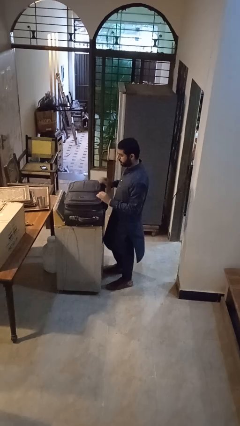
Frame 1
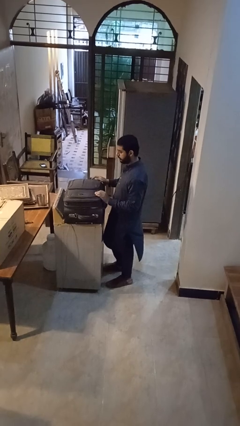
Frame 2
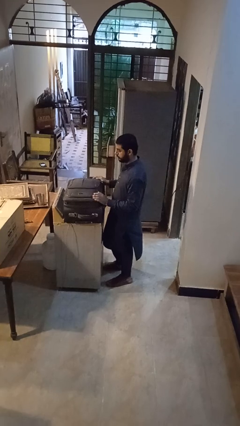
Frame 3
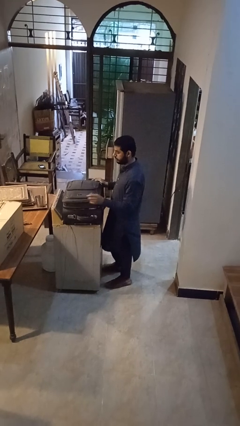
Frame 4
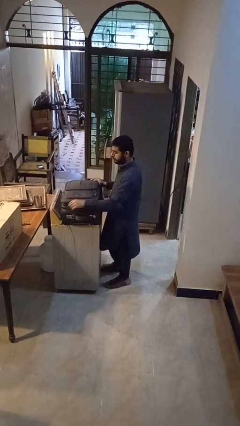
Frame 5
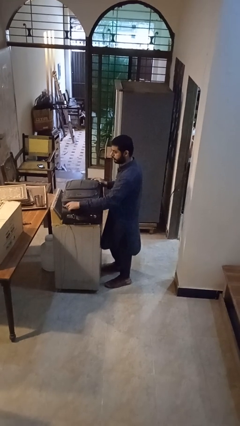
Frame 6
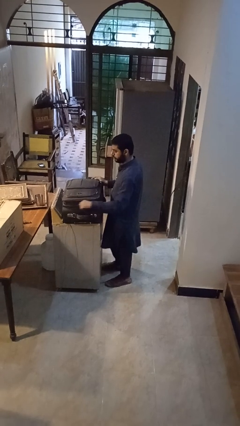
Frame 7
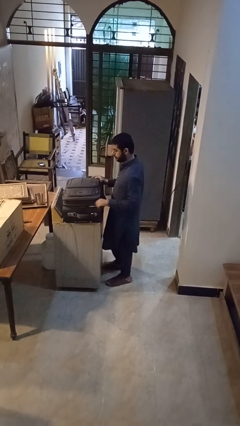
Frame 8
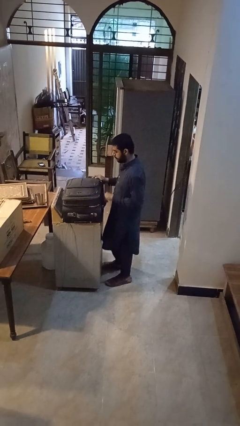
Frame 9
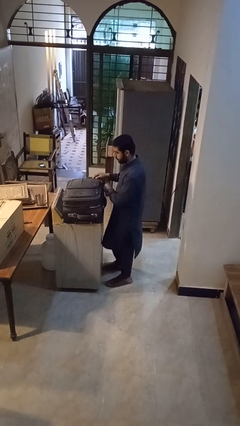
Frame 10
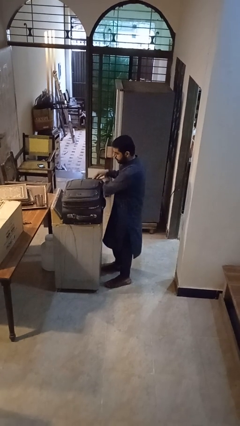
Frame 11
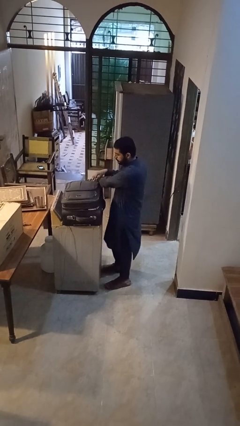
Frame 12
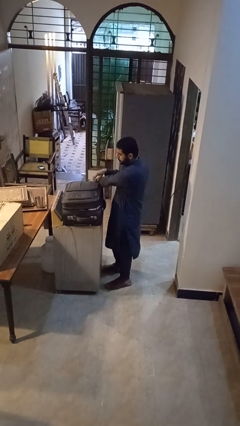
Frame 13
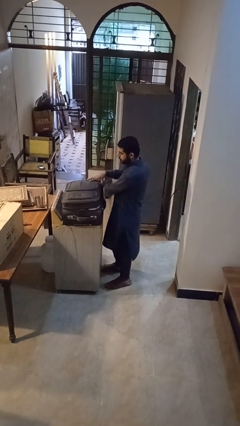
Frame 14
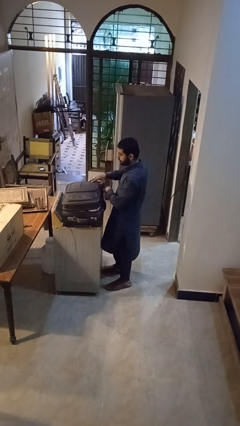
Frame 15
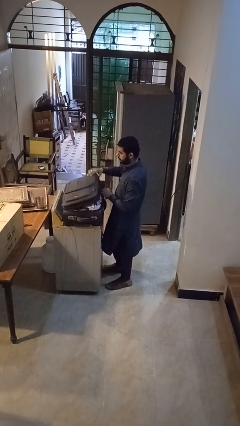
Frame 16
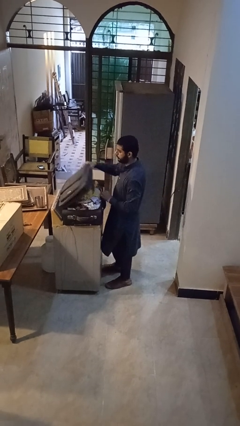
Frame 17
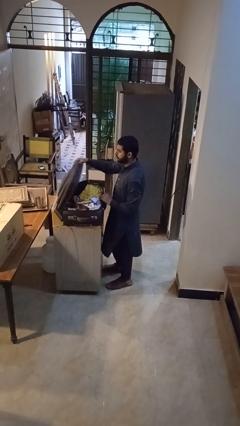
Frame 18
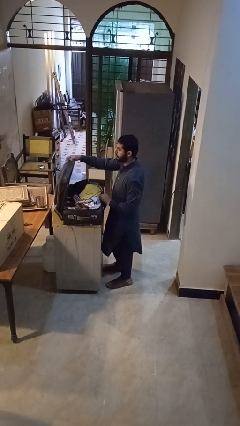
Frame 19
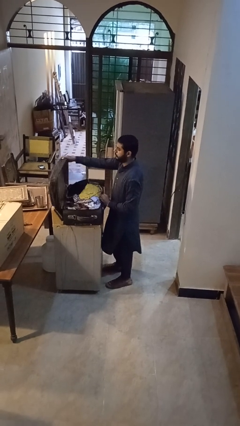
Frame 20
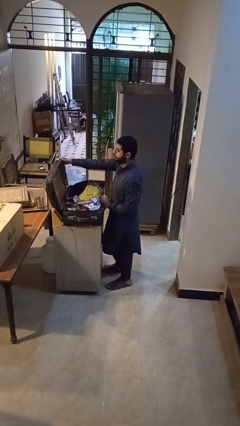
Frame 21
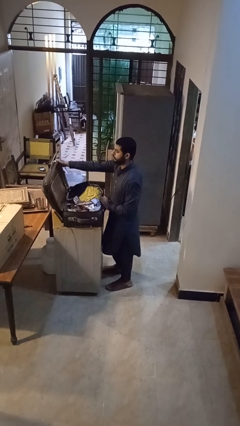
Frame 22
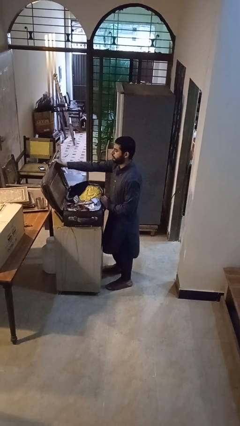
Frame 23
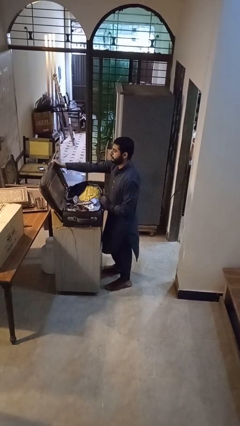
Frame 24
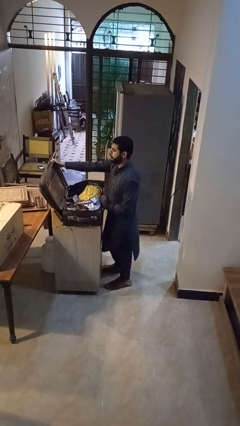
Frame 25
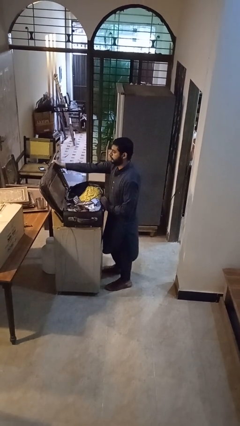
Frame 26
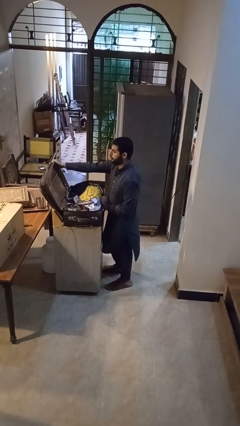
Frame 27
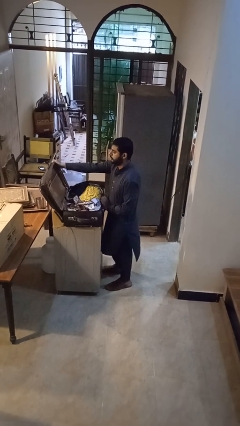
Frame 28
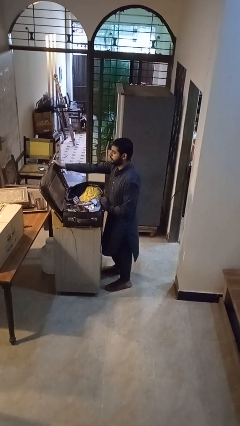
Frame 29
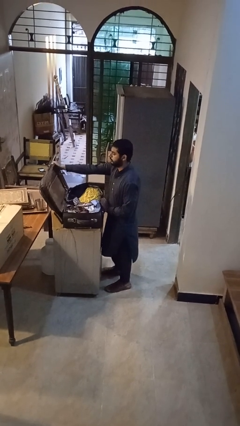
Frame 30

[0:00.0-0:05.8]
person opens suitcase

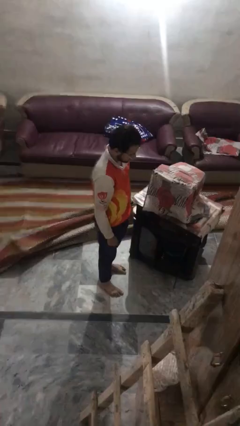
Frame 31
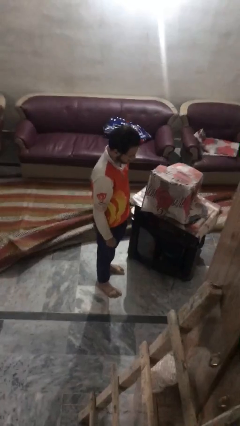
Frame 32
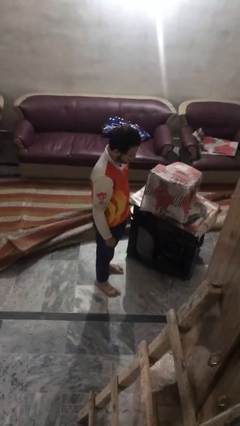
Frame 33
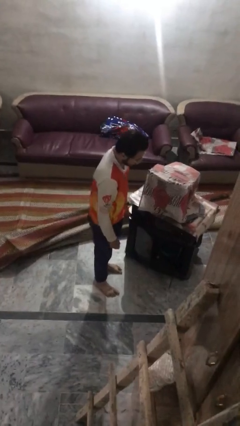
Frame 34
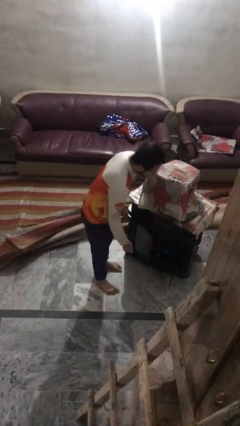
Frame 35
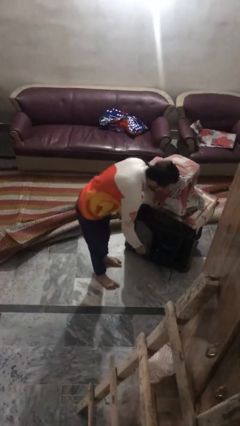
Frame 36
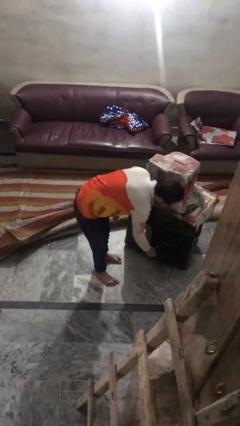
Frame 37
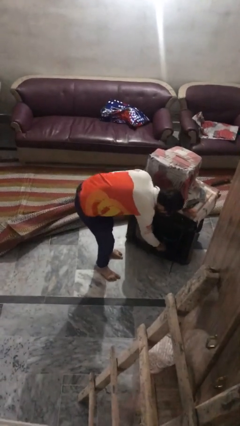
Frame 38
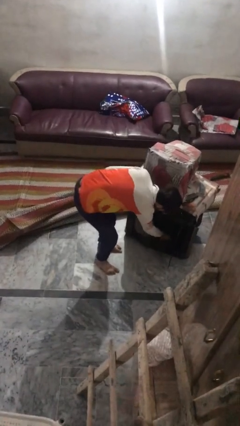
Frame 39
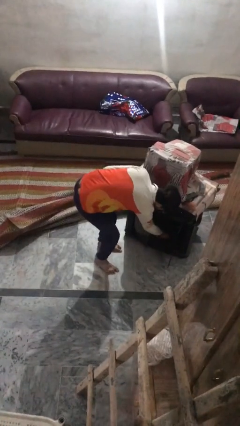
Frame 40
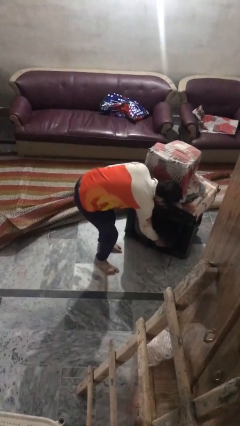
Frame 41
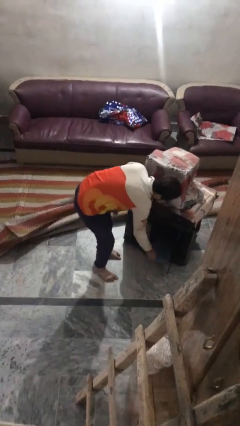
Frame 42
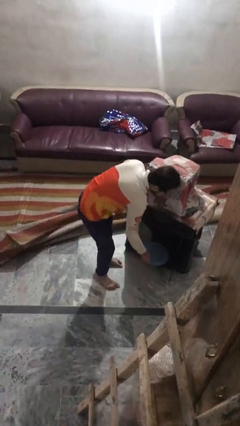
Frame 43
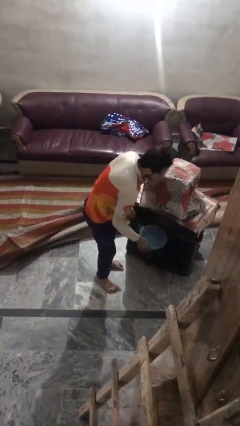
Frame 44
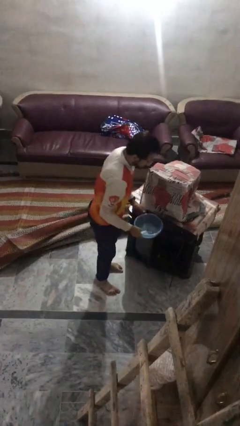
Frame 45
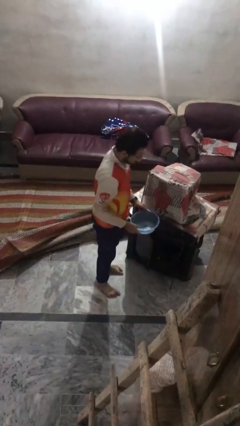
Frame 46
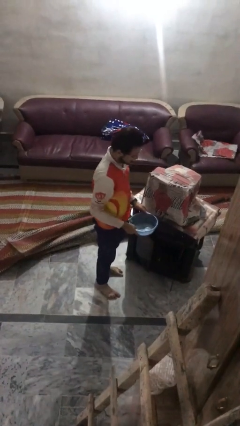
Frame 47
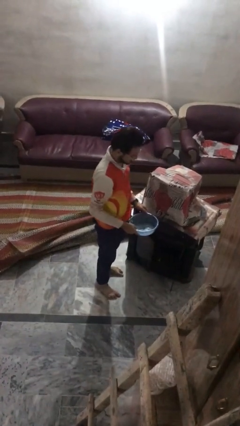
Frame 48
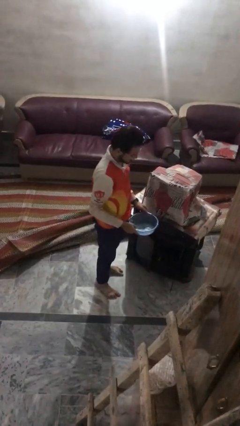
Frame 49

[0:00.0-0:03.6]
person picks up object from cabinet

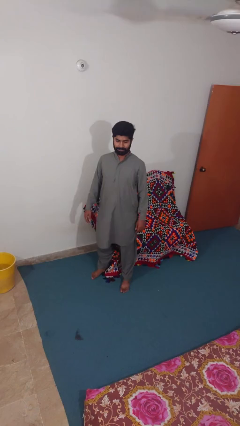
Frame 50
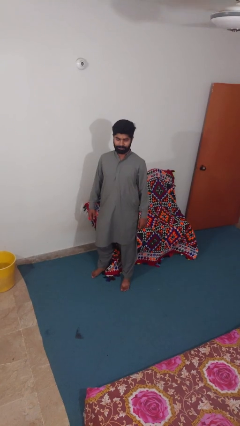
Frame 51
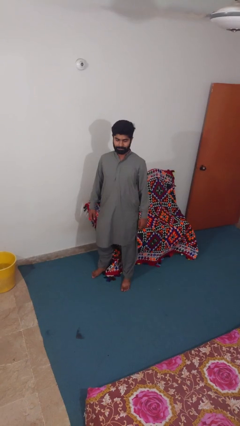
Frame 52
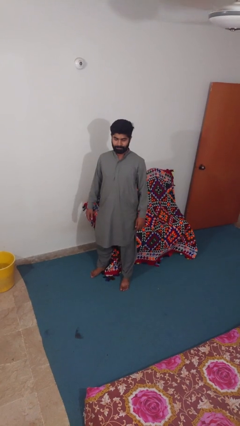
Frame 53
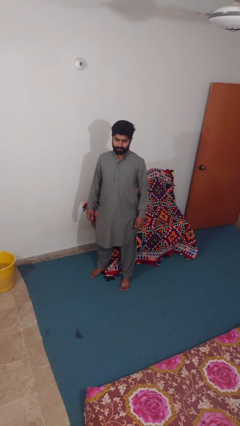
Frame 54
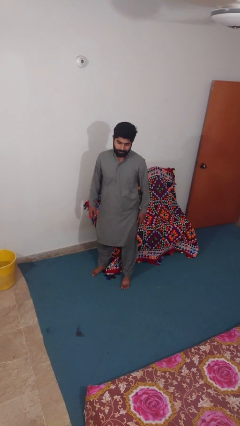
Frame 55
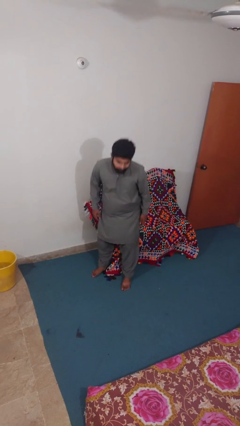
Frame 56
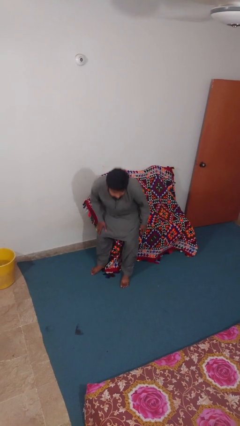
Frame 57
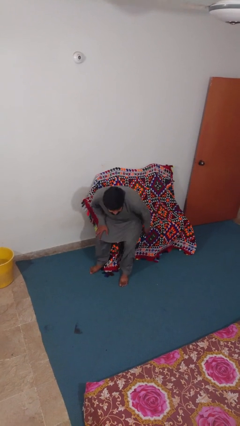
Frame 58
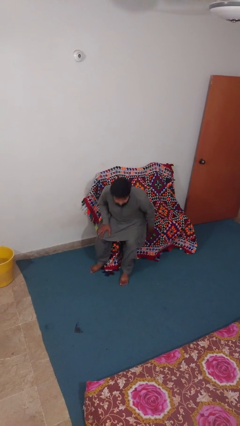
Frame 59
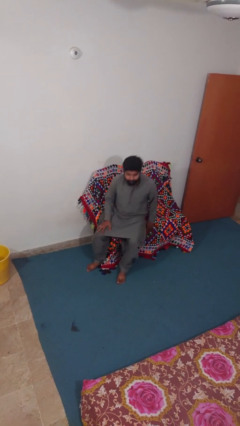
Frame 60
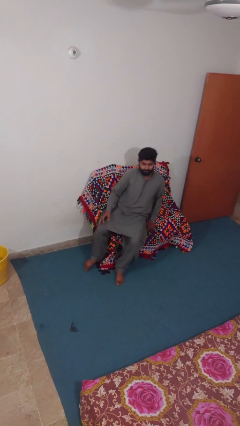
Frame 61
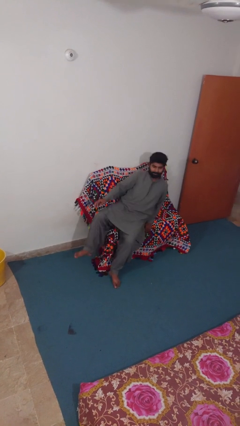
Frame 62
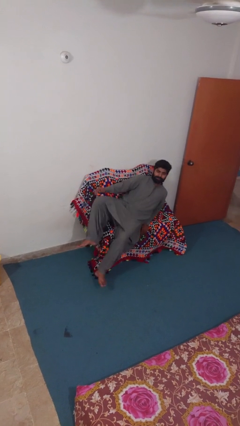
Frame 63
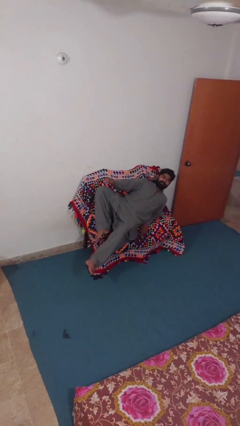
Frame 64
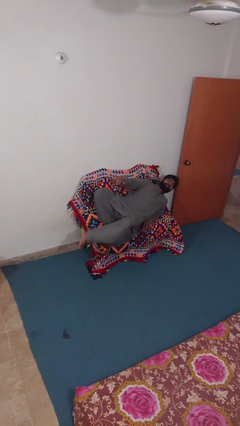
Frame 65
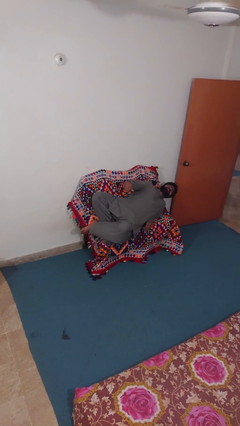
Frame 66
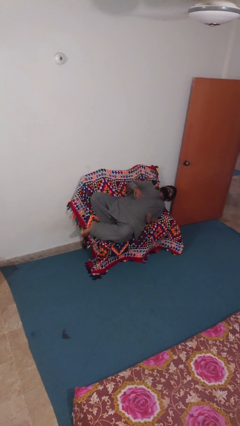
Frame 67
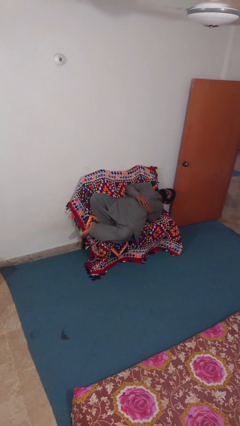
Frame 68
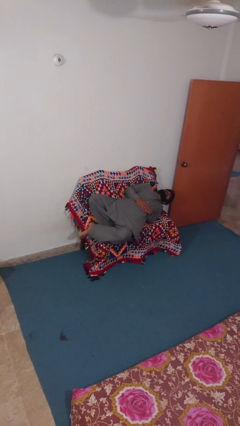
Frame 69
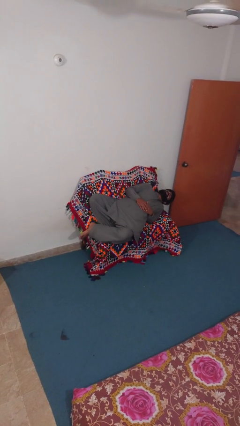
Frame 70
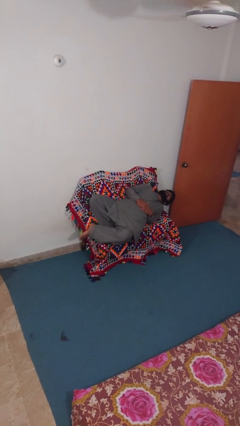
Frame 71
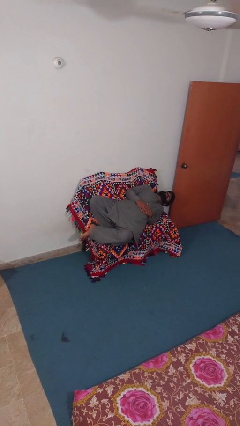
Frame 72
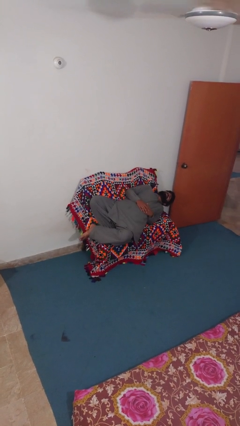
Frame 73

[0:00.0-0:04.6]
person lies down on couch

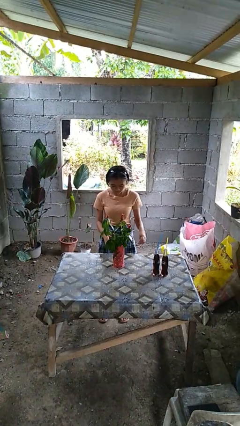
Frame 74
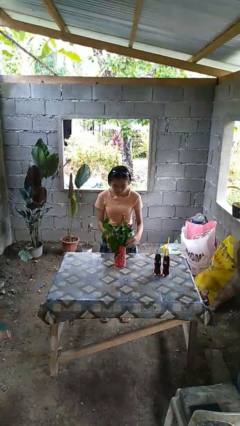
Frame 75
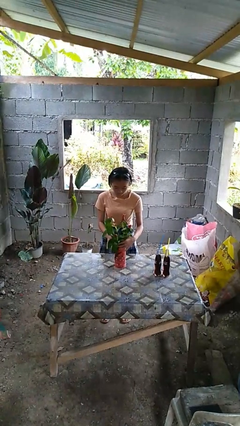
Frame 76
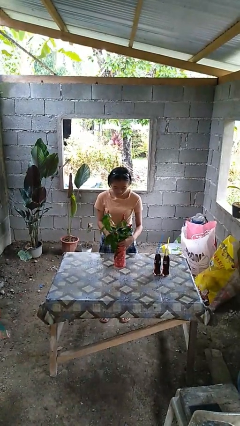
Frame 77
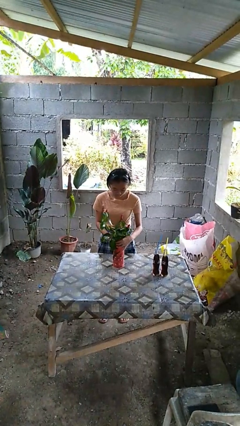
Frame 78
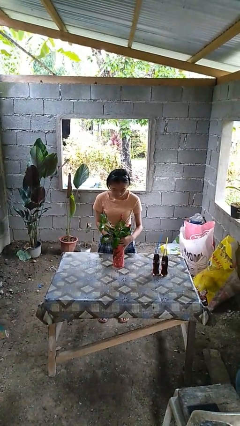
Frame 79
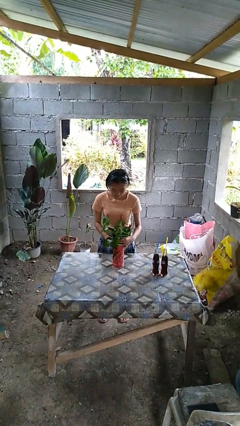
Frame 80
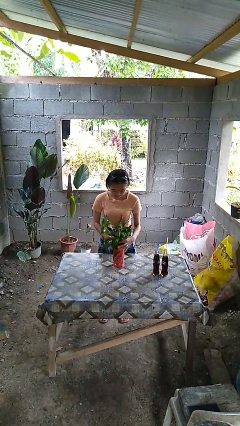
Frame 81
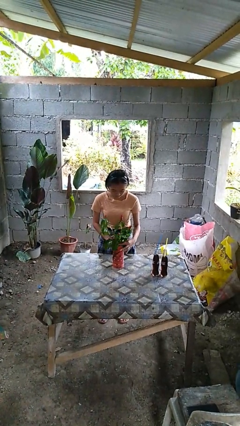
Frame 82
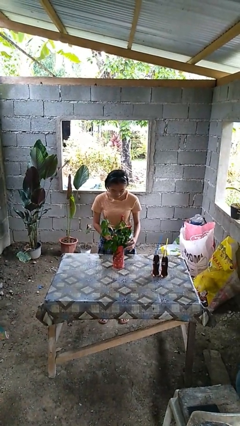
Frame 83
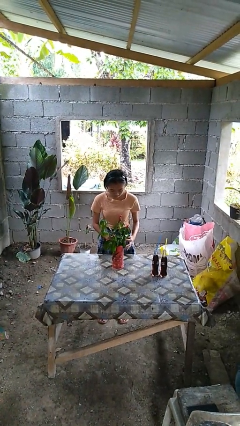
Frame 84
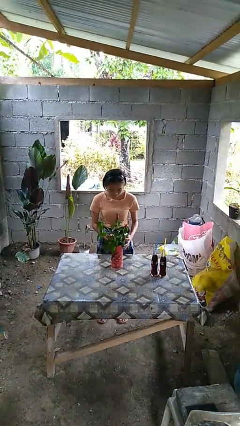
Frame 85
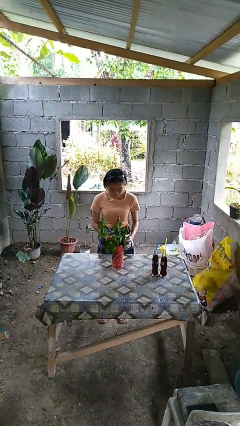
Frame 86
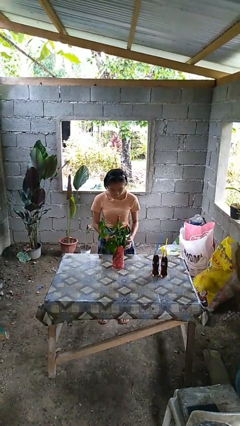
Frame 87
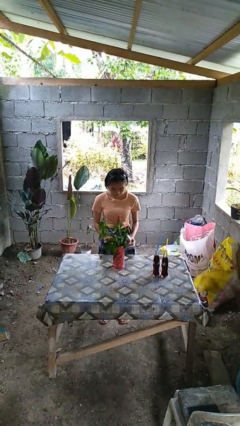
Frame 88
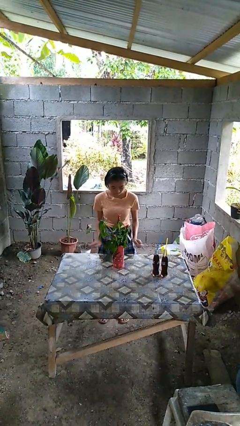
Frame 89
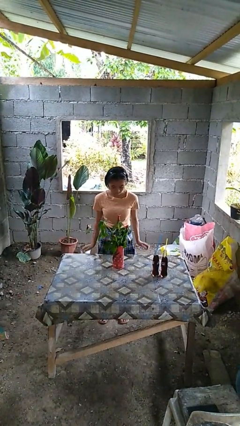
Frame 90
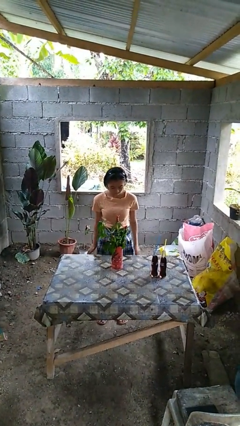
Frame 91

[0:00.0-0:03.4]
person arranges flowers in vase

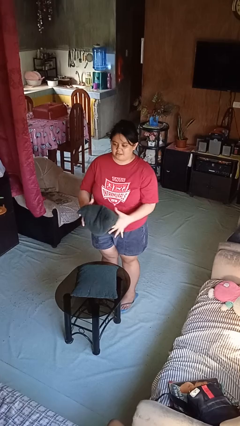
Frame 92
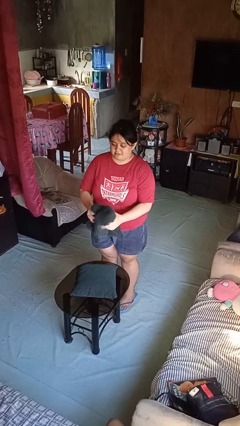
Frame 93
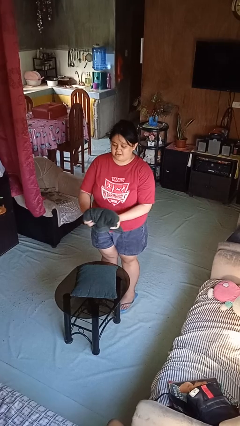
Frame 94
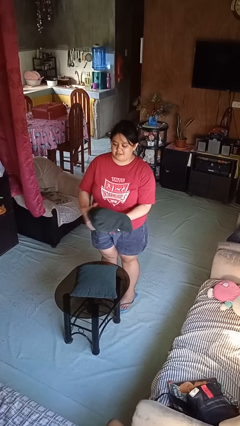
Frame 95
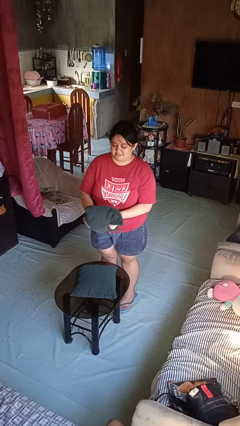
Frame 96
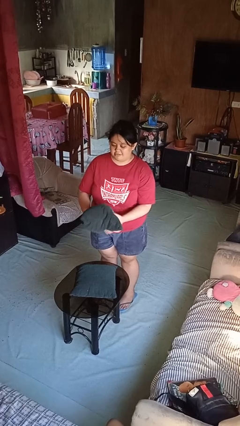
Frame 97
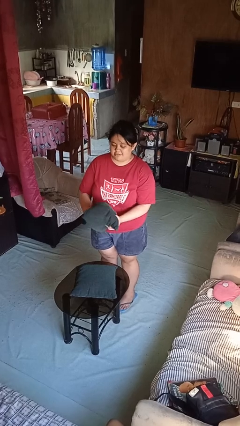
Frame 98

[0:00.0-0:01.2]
person squeezes object
